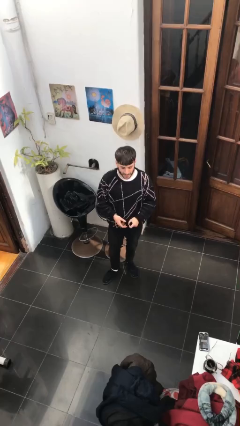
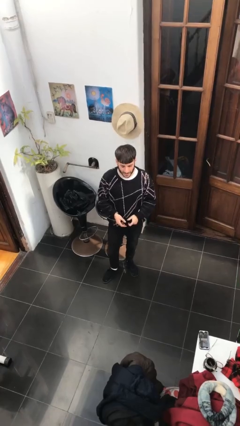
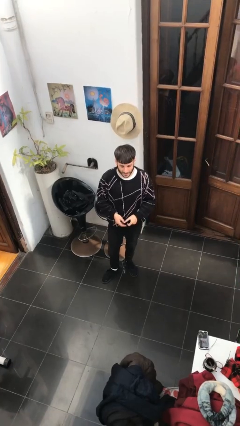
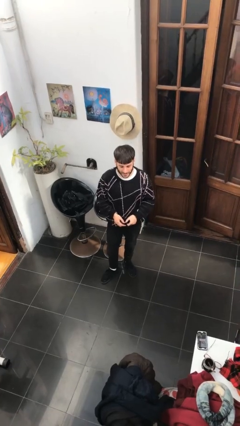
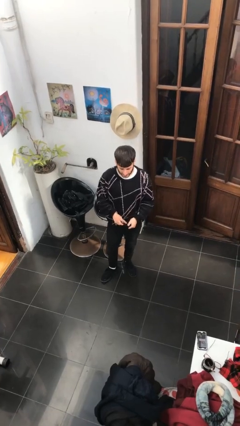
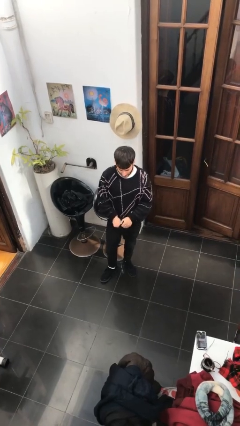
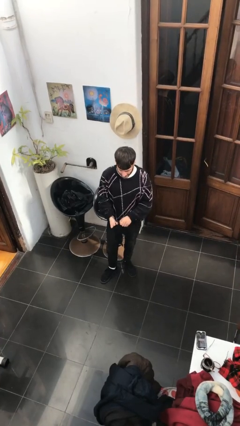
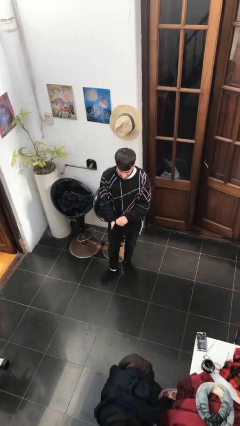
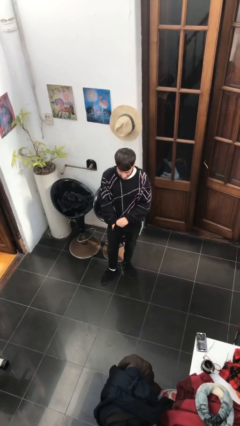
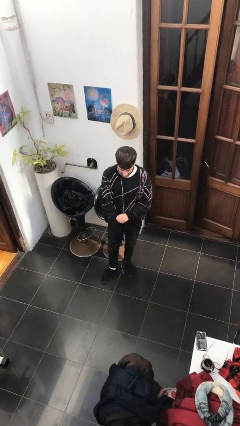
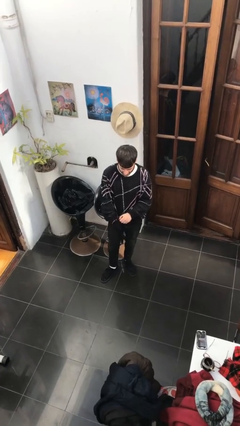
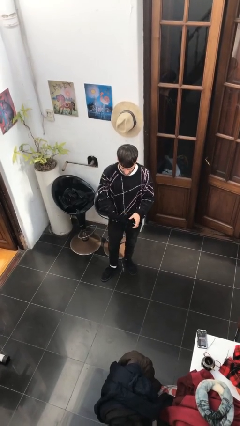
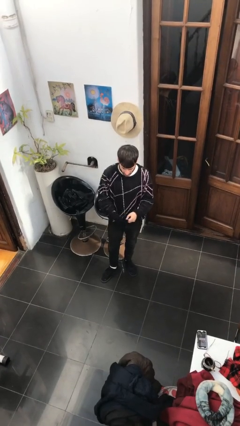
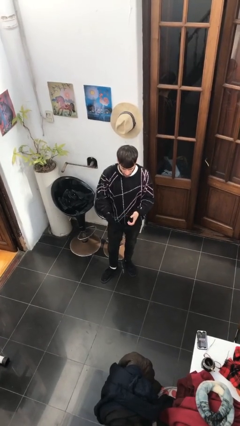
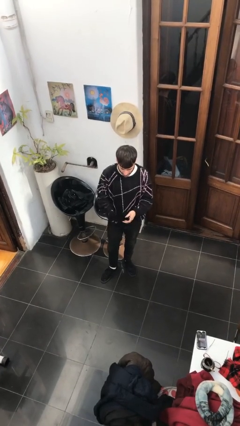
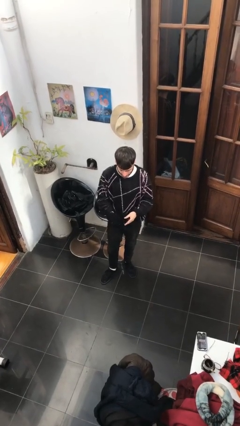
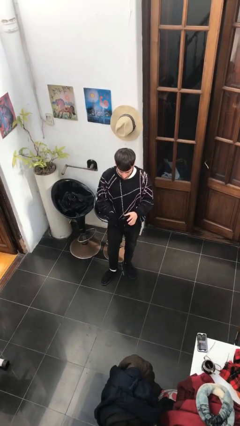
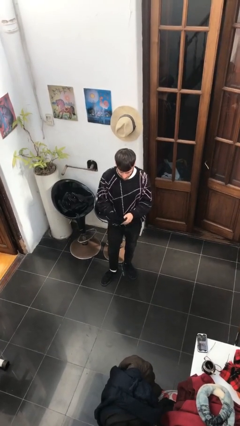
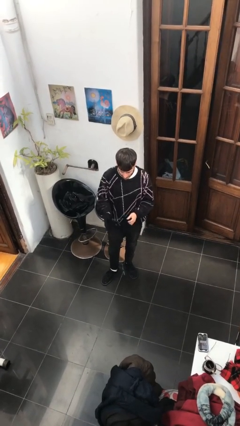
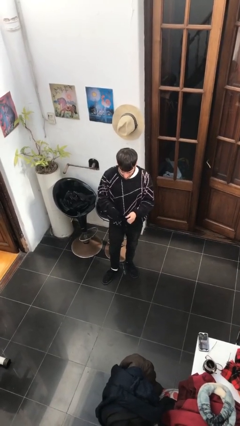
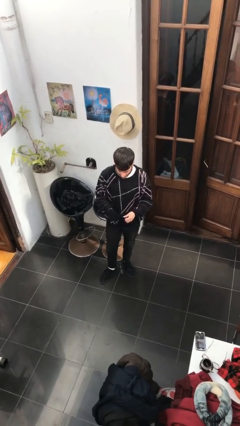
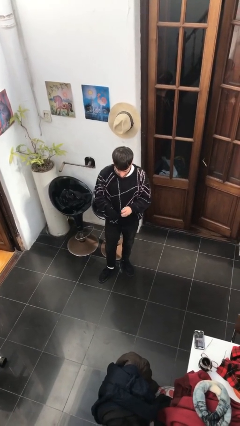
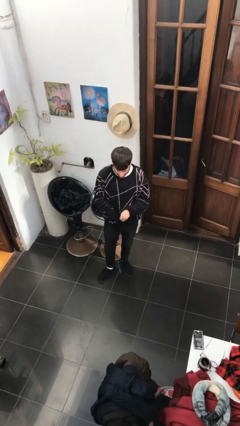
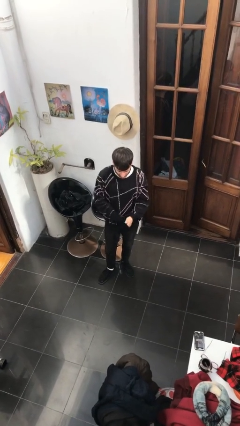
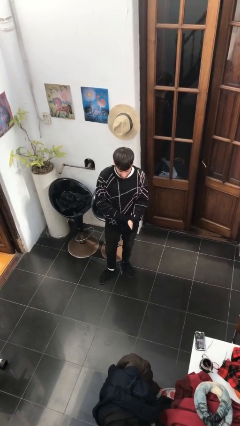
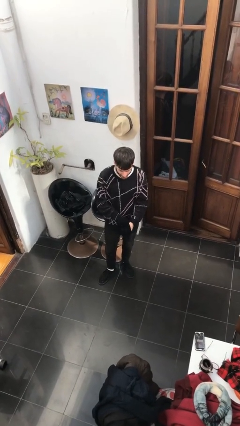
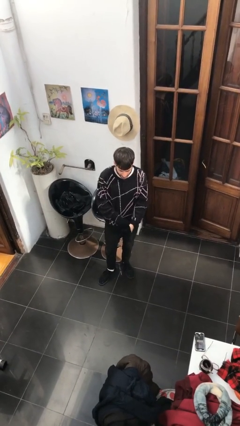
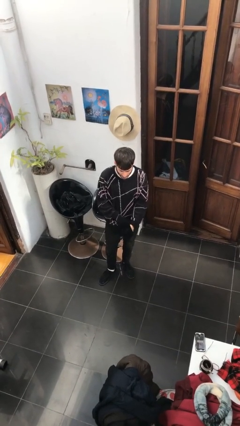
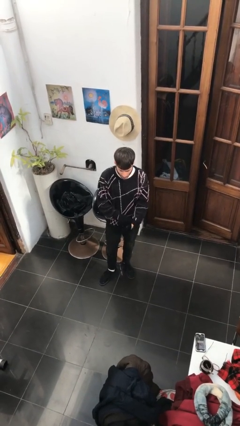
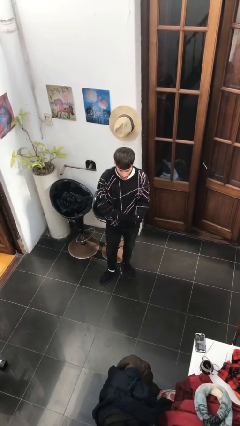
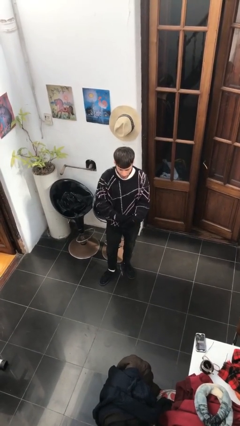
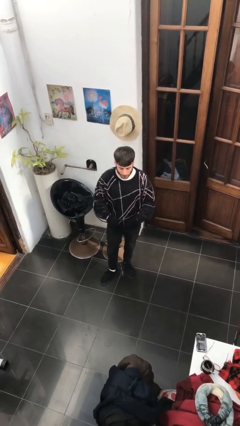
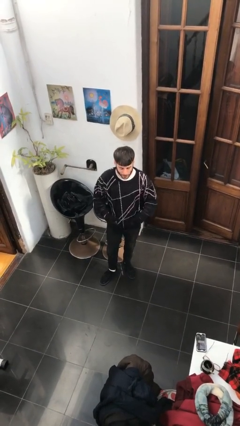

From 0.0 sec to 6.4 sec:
person puts on gloves

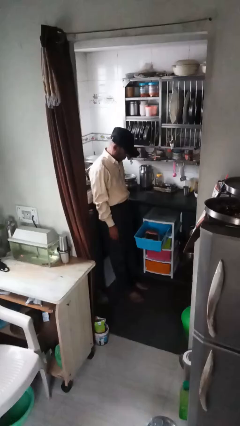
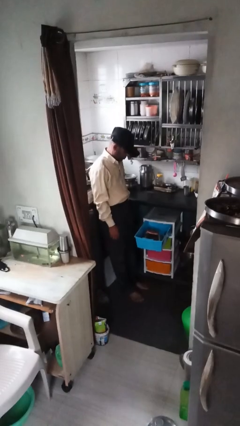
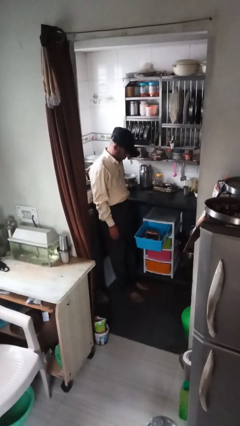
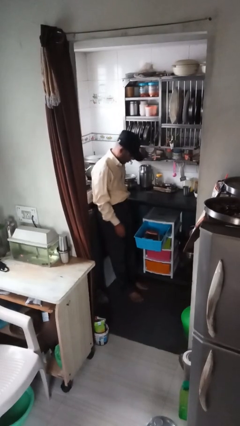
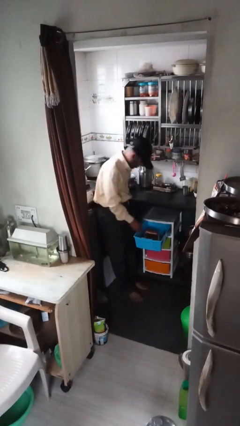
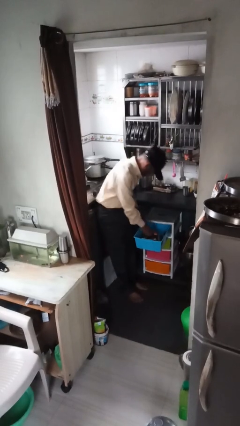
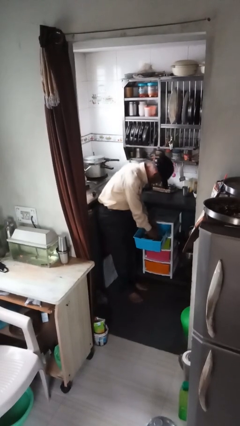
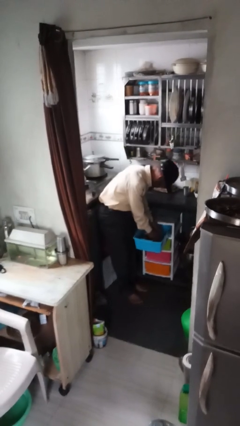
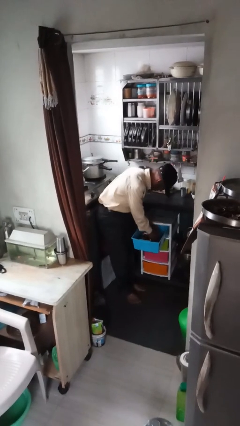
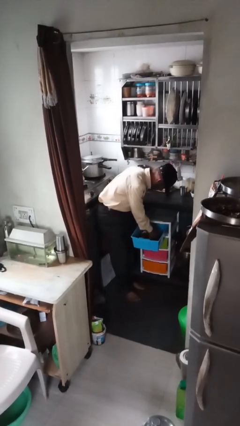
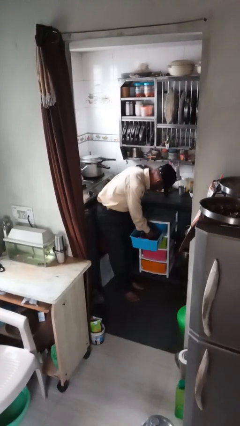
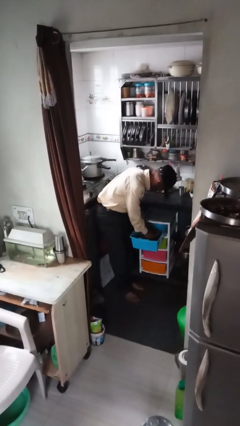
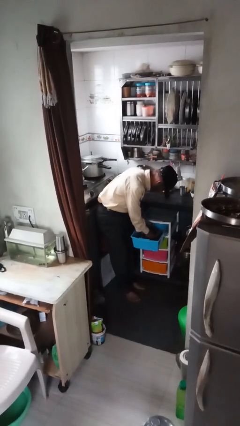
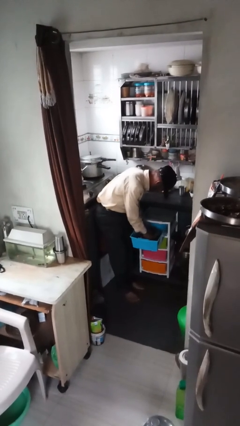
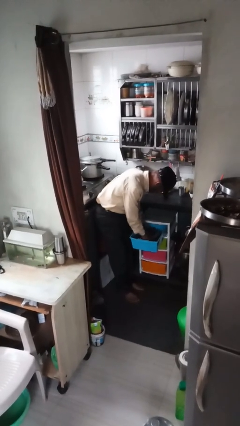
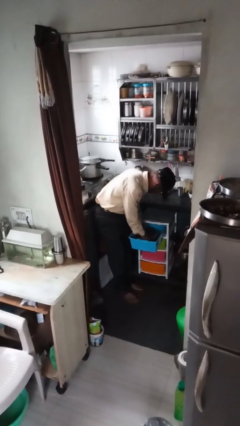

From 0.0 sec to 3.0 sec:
person searches in kitchen drawer

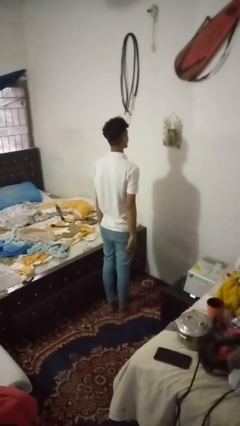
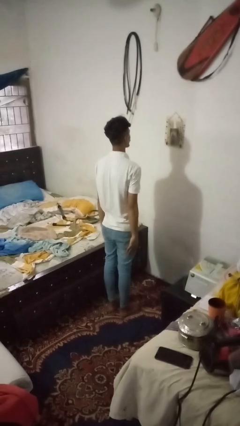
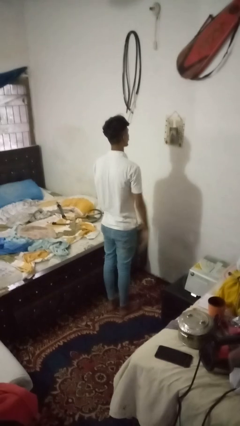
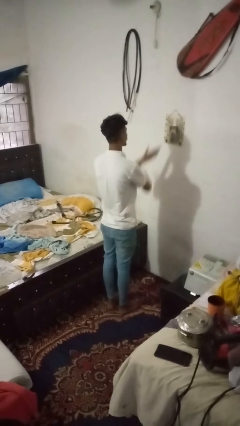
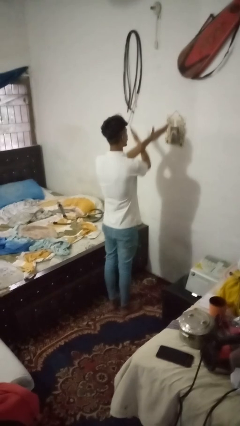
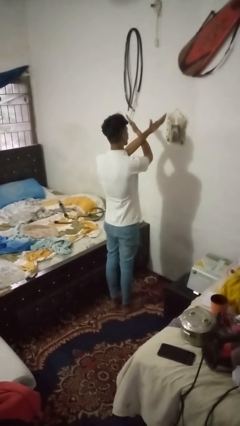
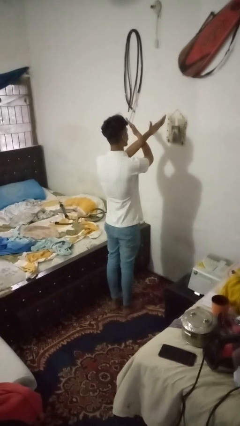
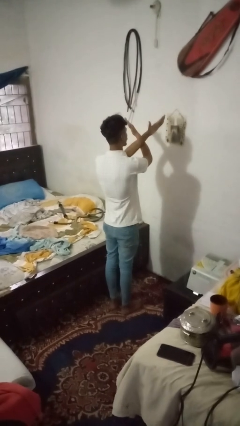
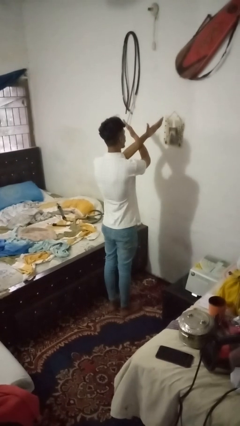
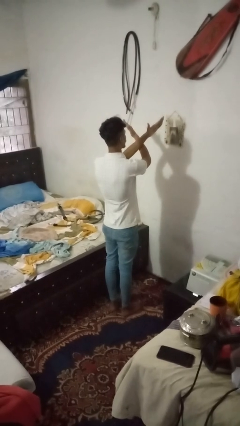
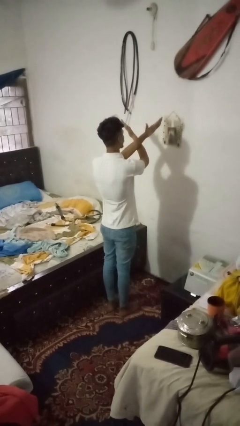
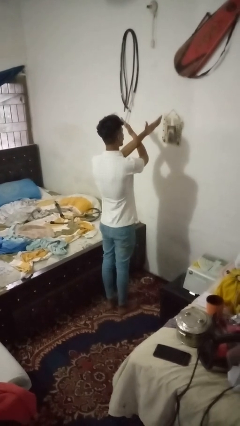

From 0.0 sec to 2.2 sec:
person gestures arms x

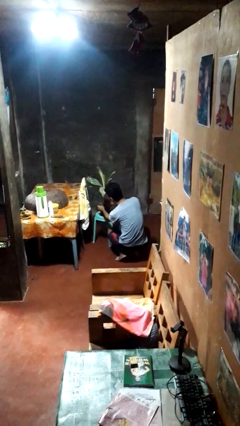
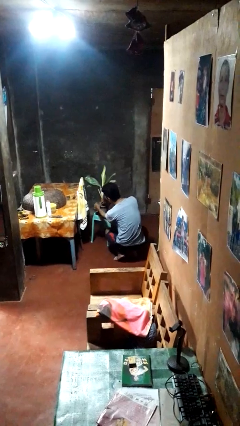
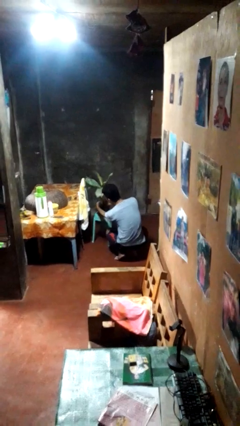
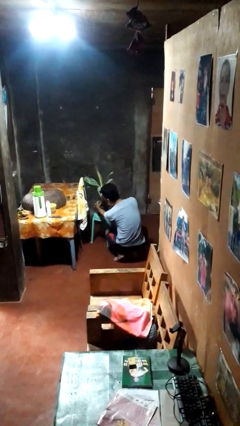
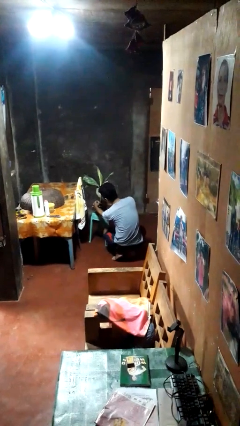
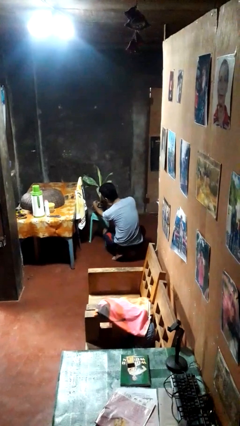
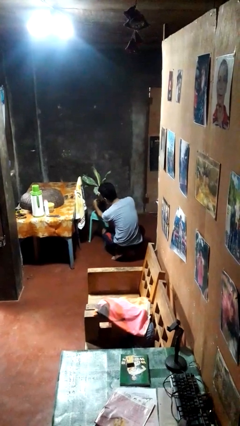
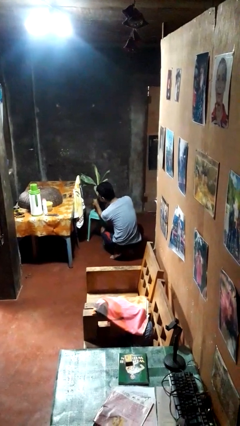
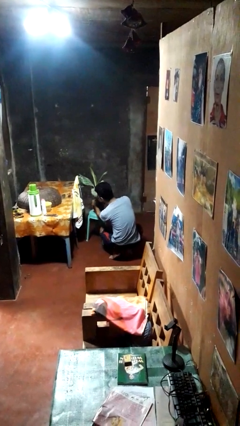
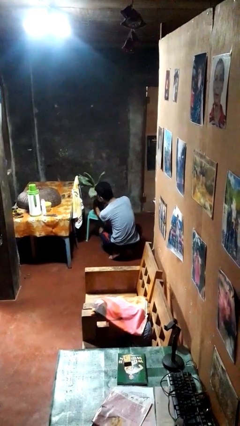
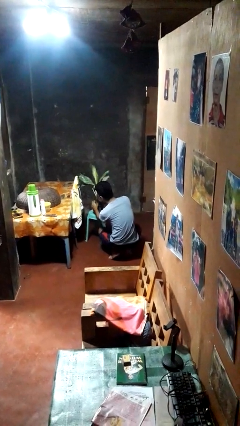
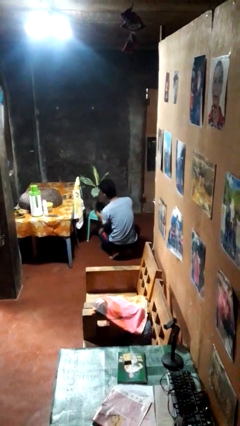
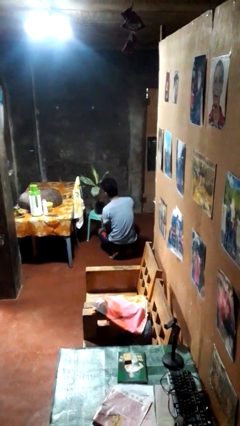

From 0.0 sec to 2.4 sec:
person arranges flowers in vase

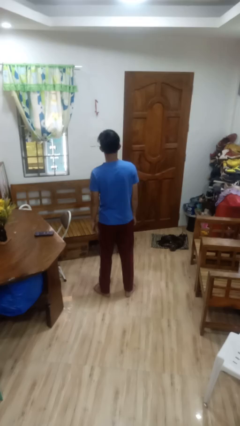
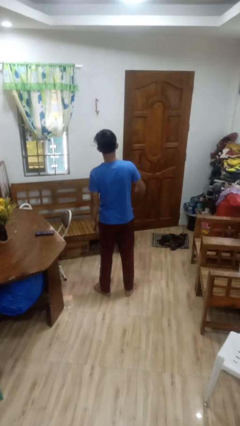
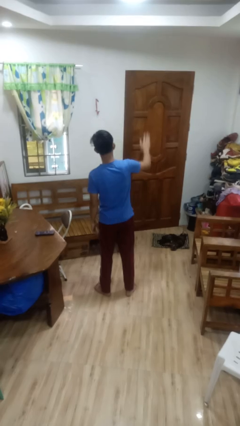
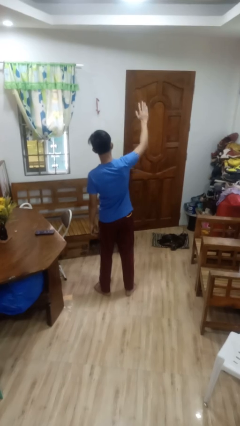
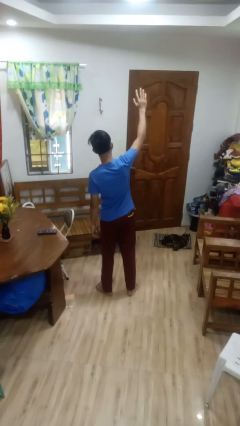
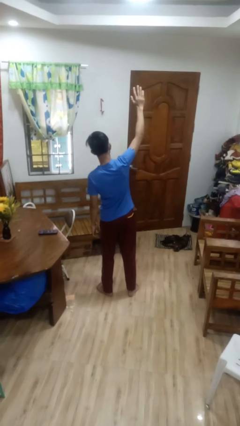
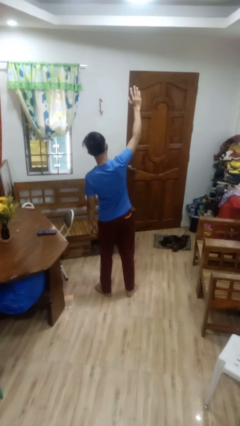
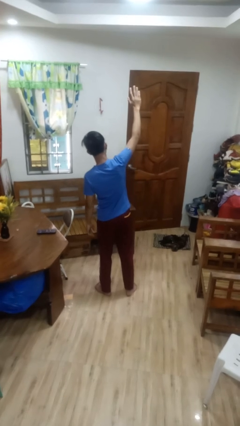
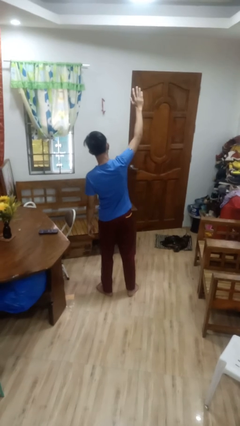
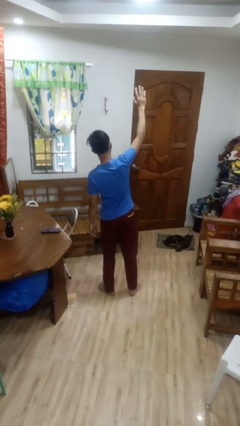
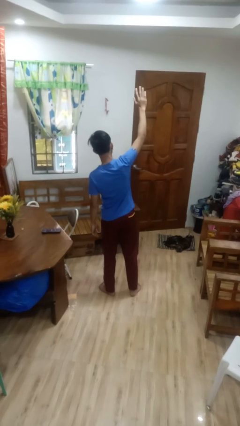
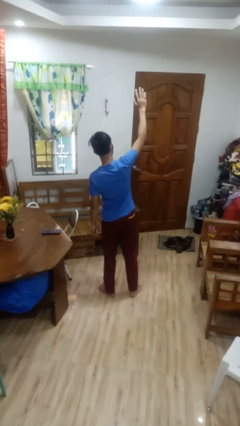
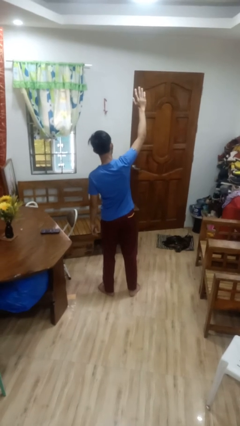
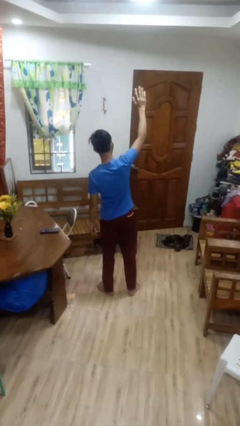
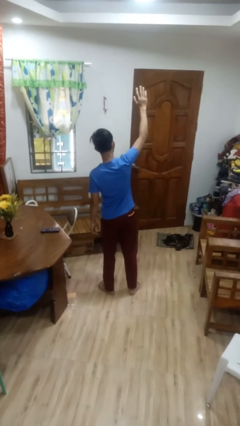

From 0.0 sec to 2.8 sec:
person gestures raise hand

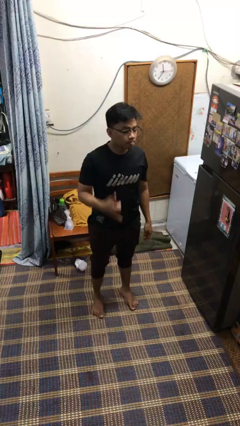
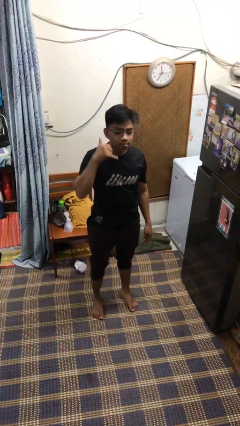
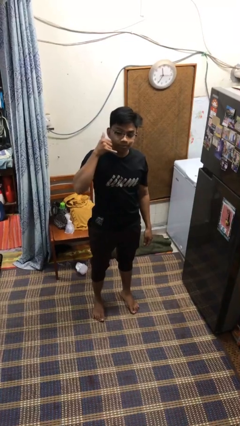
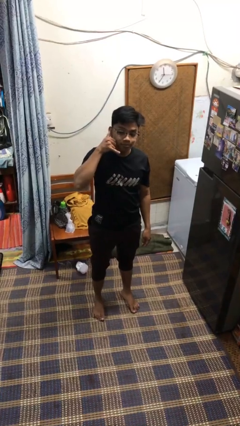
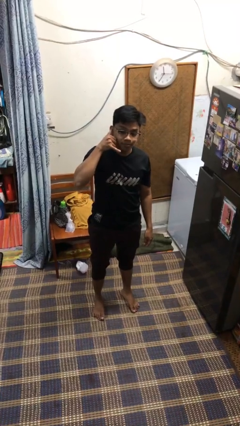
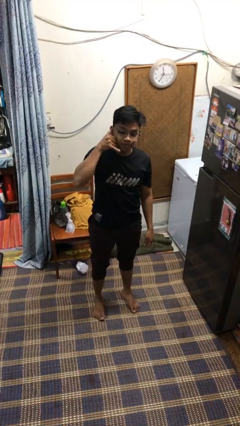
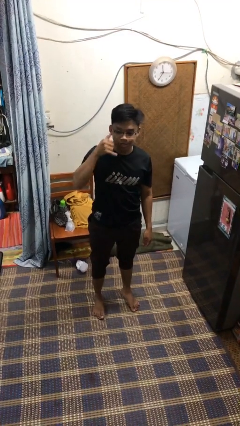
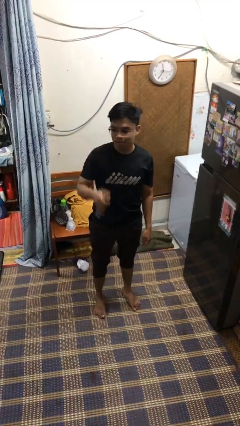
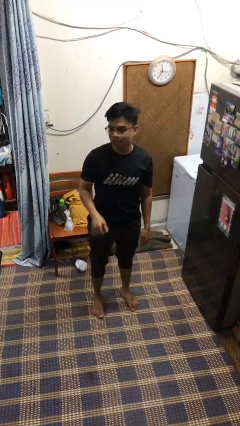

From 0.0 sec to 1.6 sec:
person gestures call me
